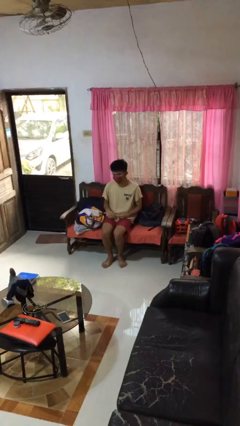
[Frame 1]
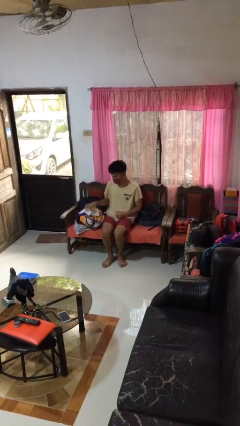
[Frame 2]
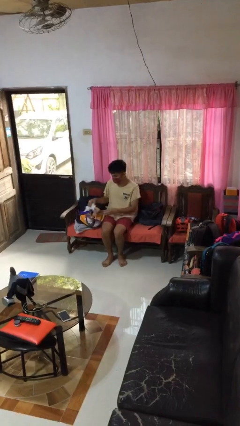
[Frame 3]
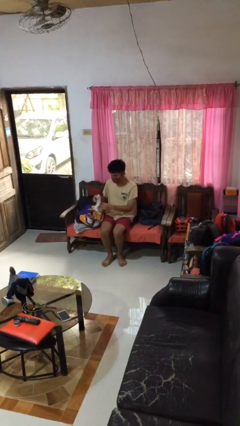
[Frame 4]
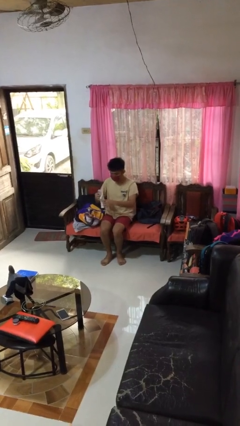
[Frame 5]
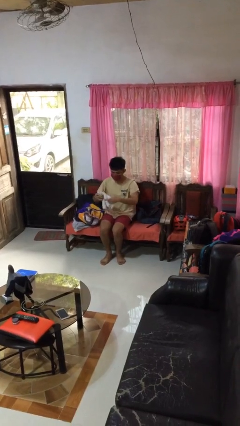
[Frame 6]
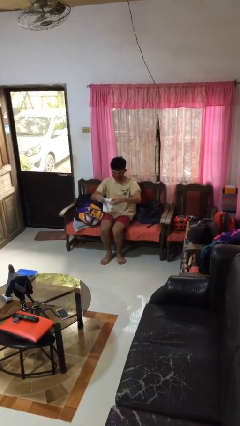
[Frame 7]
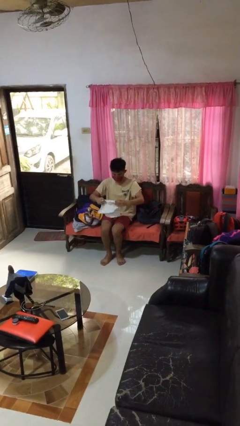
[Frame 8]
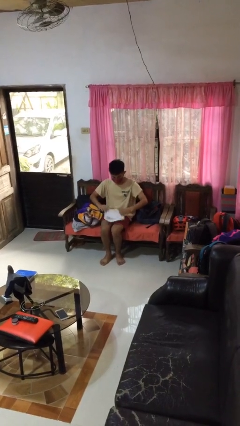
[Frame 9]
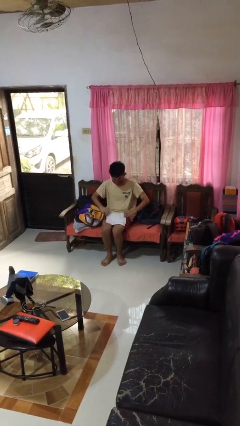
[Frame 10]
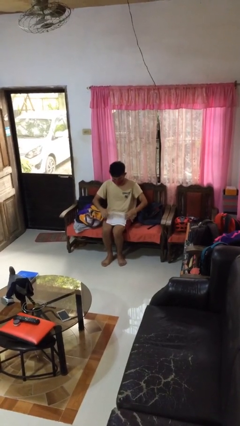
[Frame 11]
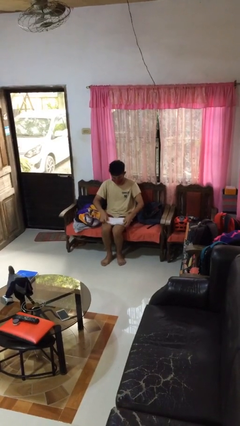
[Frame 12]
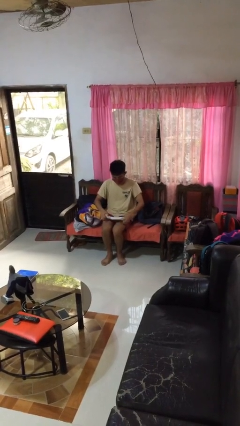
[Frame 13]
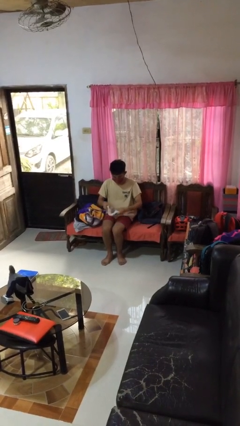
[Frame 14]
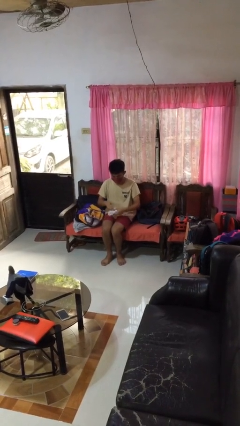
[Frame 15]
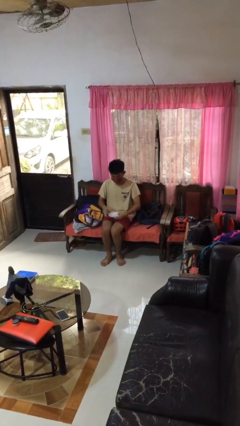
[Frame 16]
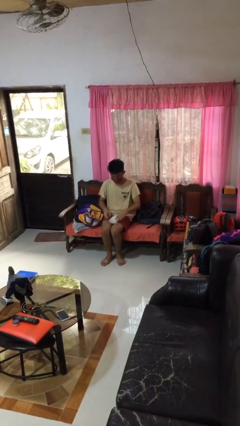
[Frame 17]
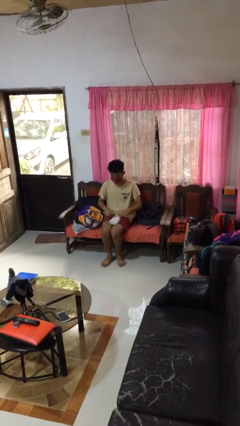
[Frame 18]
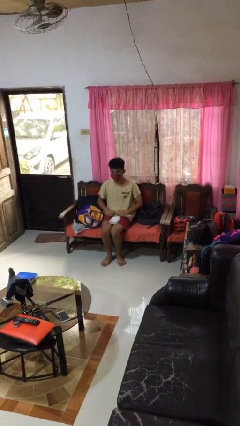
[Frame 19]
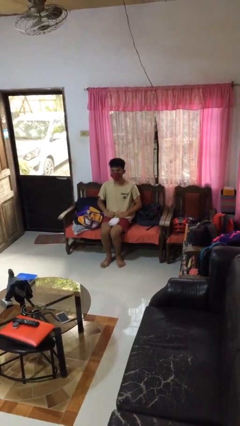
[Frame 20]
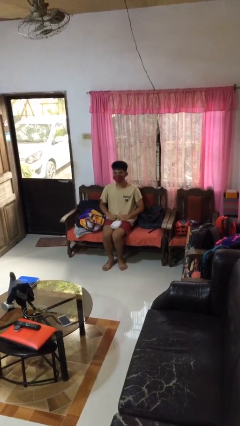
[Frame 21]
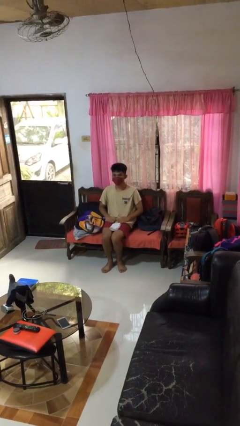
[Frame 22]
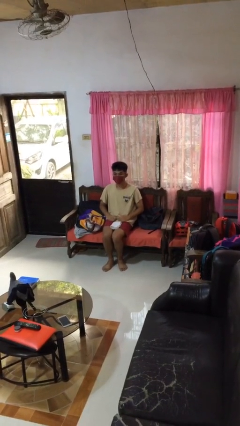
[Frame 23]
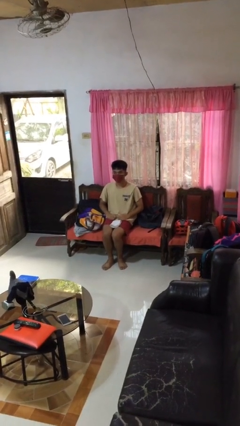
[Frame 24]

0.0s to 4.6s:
person folds towel

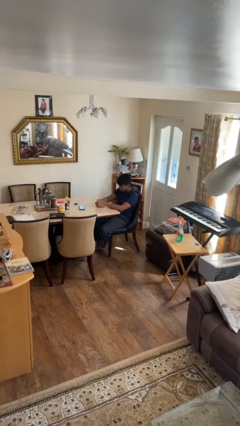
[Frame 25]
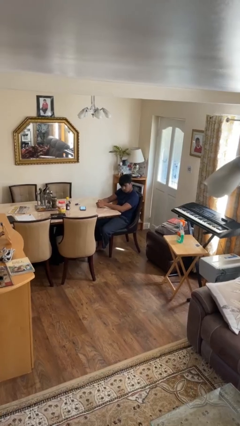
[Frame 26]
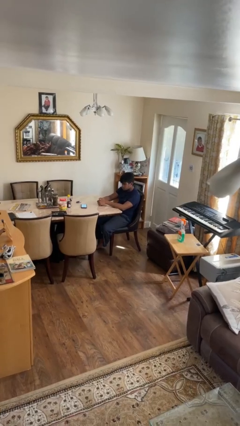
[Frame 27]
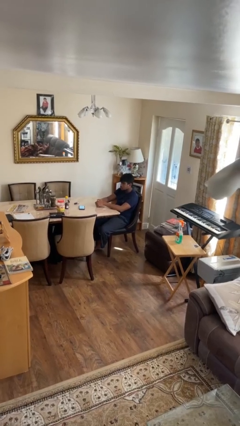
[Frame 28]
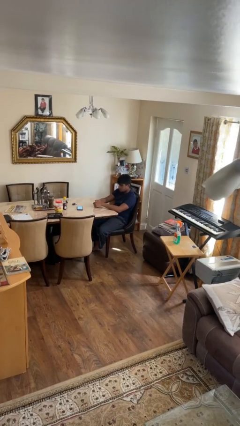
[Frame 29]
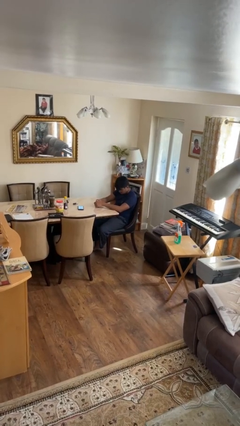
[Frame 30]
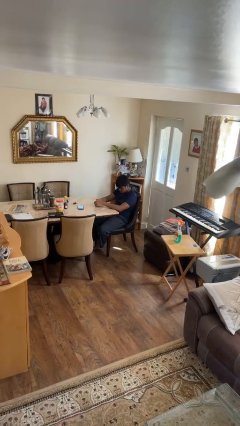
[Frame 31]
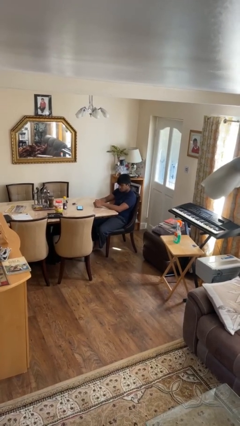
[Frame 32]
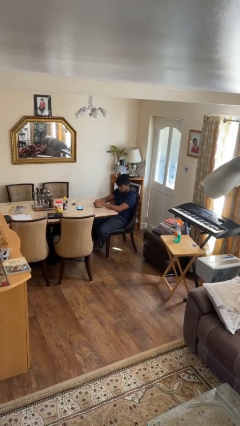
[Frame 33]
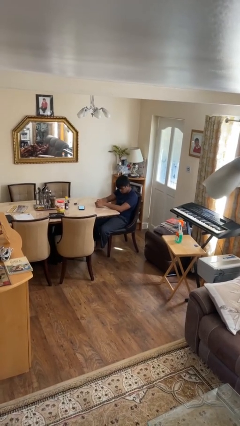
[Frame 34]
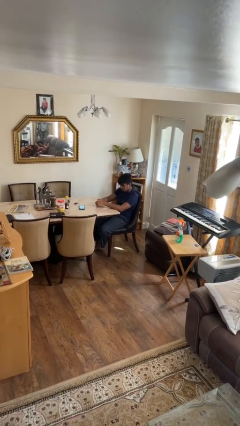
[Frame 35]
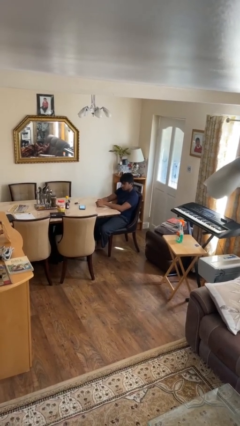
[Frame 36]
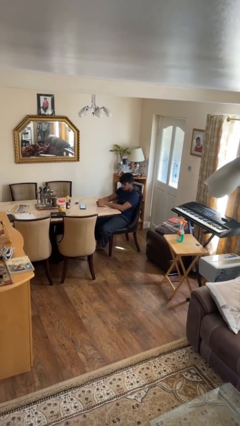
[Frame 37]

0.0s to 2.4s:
person nods head

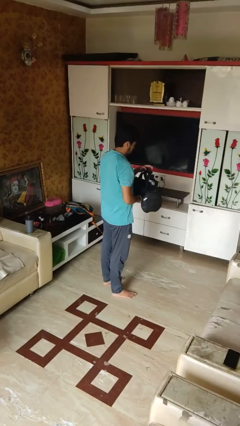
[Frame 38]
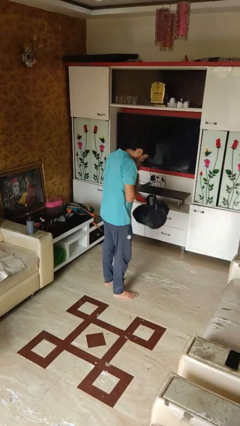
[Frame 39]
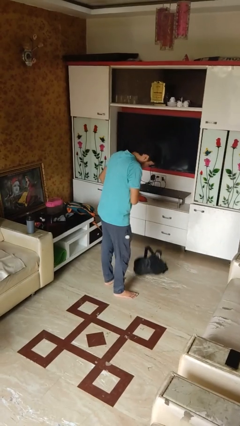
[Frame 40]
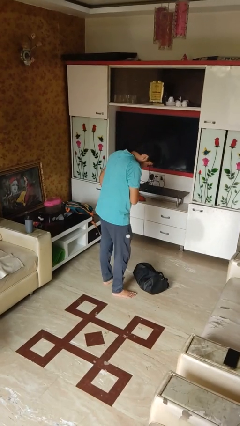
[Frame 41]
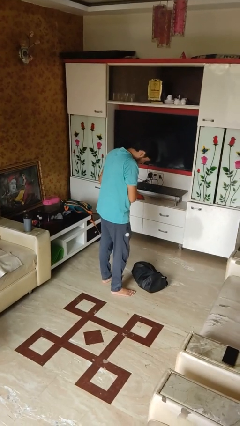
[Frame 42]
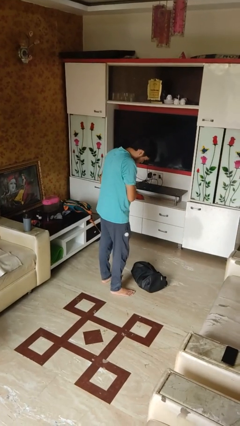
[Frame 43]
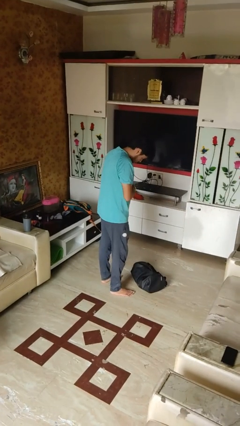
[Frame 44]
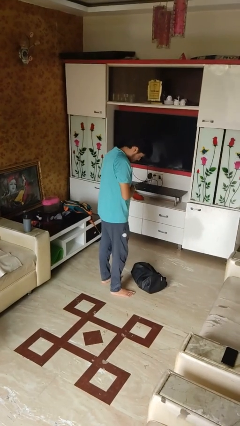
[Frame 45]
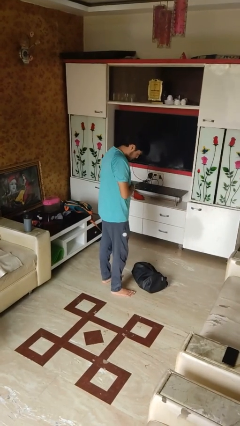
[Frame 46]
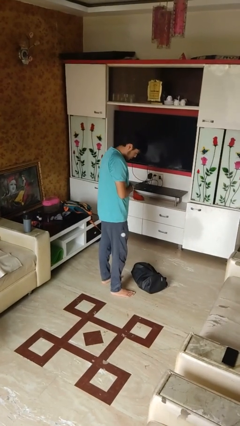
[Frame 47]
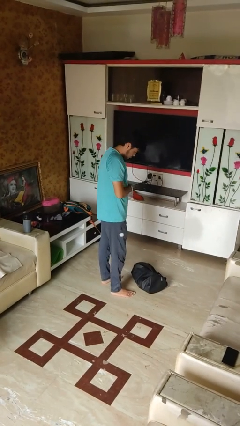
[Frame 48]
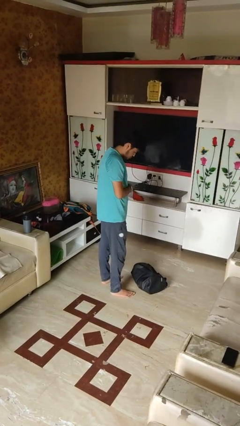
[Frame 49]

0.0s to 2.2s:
person drops object

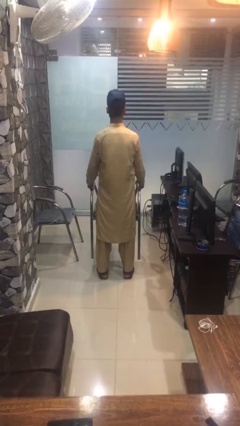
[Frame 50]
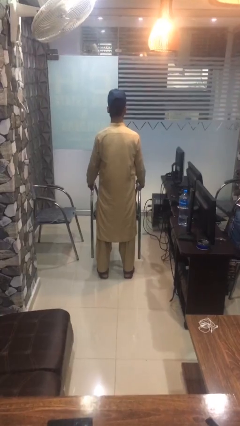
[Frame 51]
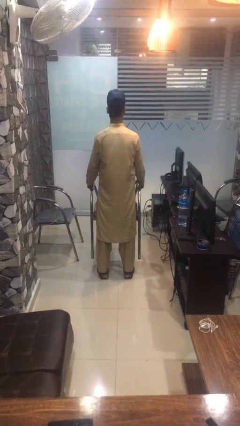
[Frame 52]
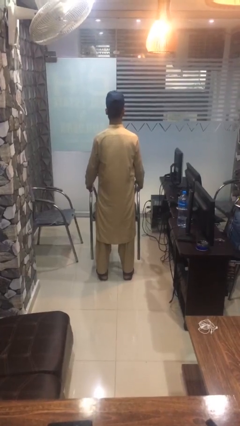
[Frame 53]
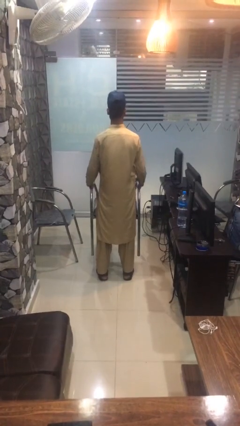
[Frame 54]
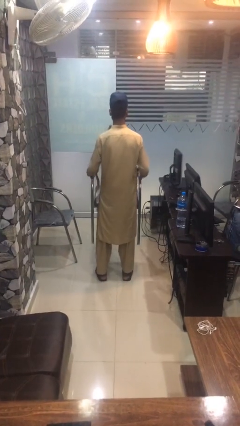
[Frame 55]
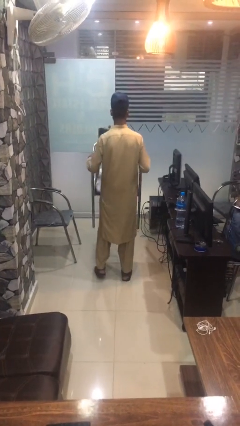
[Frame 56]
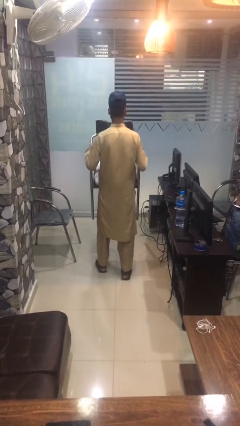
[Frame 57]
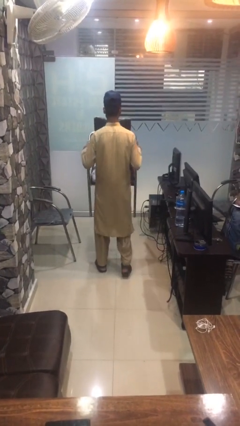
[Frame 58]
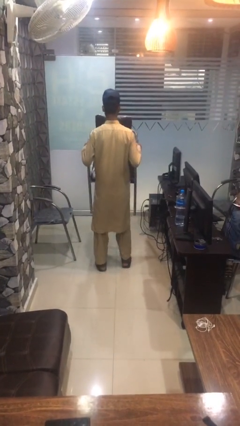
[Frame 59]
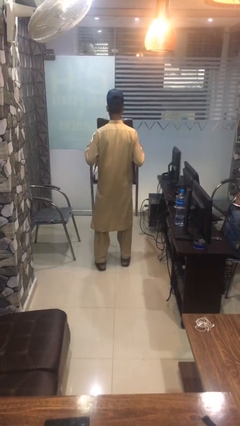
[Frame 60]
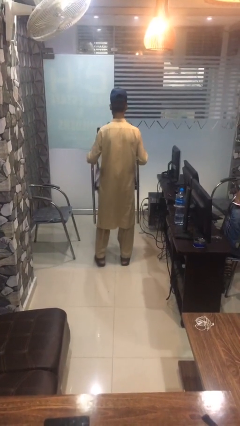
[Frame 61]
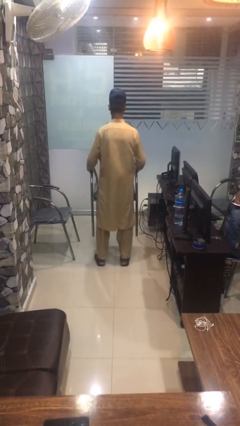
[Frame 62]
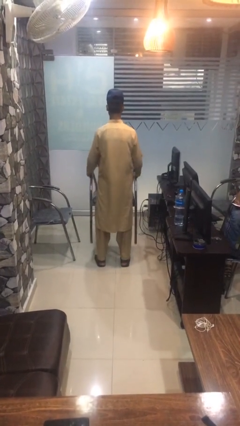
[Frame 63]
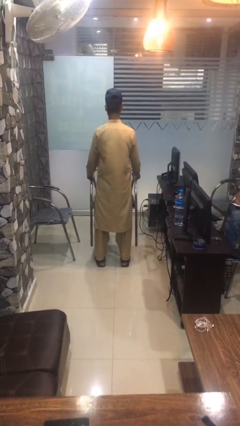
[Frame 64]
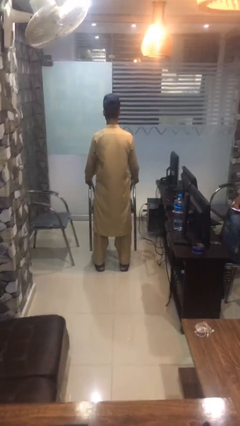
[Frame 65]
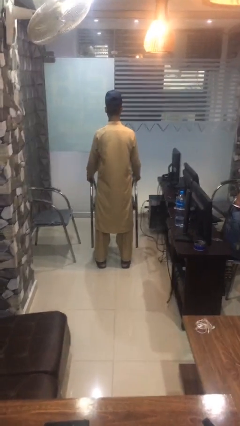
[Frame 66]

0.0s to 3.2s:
person carries furniture

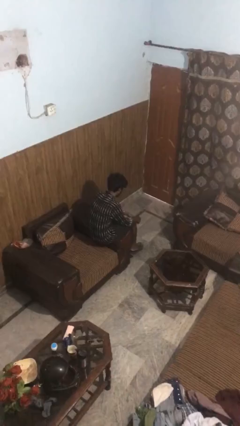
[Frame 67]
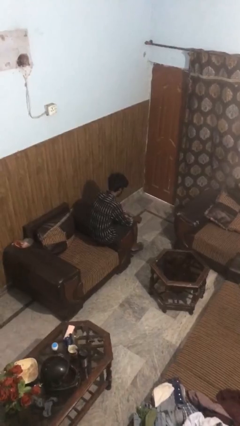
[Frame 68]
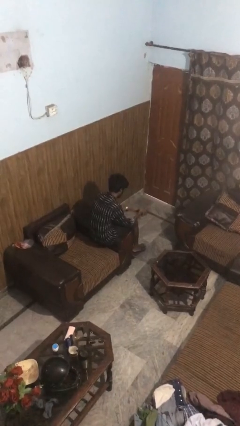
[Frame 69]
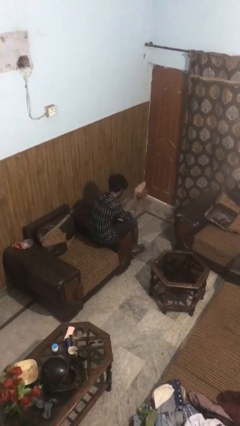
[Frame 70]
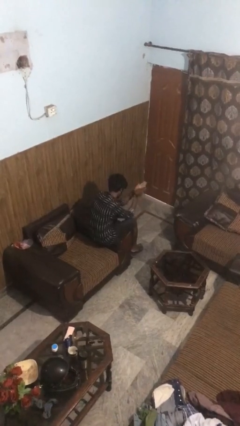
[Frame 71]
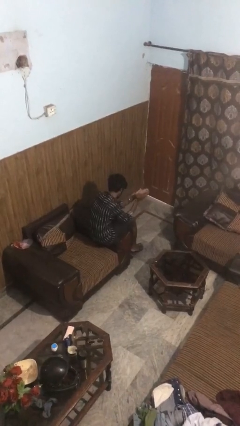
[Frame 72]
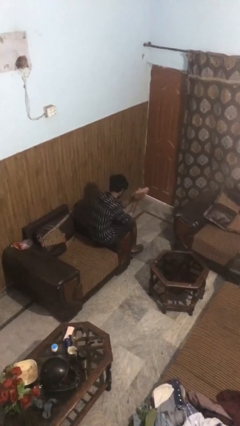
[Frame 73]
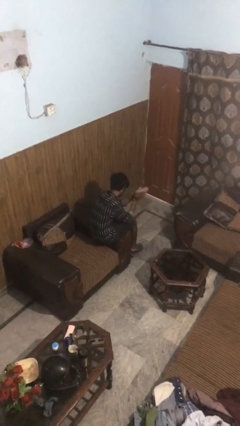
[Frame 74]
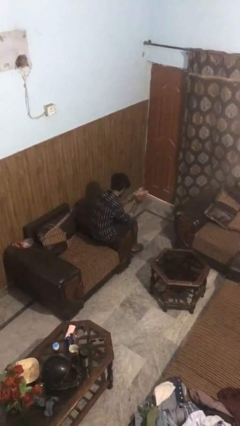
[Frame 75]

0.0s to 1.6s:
person claps hands

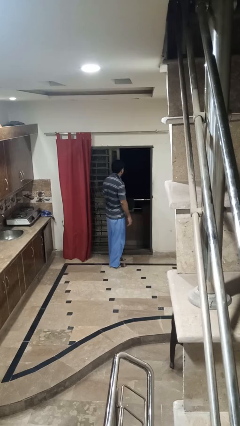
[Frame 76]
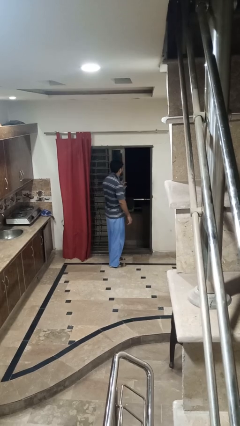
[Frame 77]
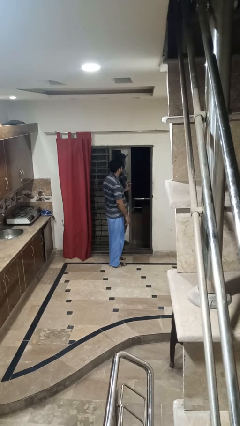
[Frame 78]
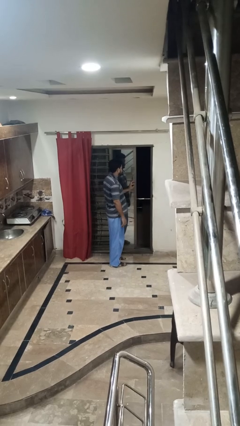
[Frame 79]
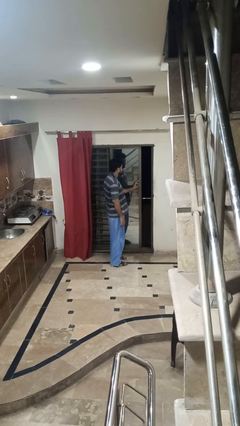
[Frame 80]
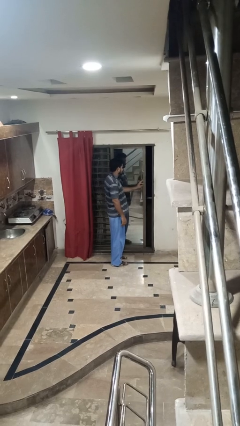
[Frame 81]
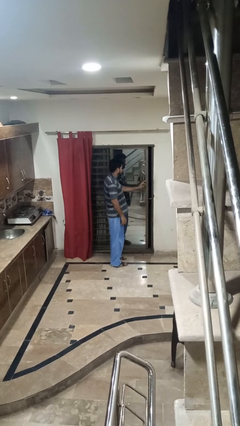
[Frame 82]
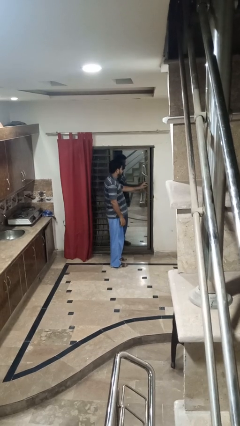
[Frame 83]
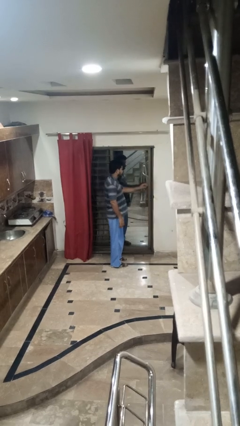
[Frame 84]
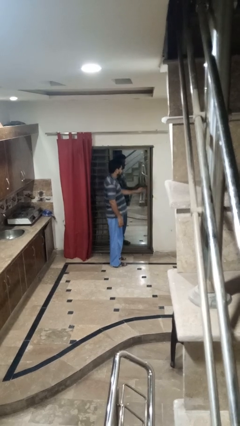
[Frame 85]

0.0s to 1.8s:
person closes sliding door

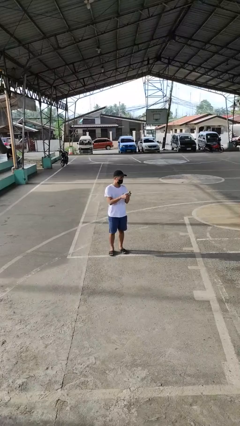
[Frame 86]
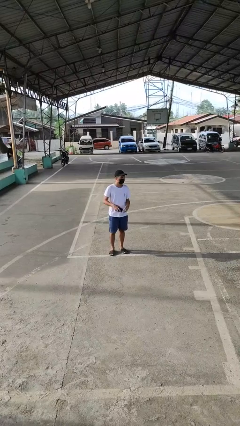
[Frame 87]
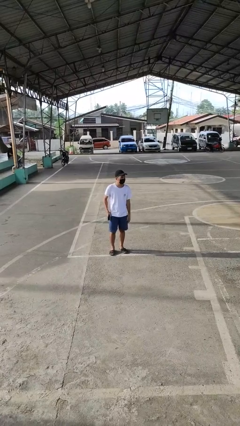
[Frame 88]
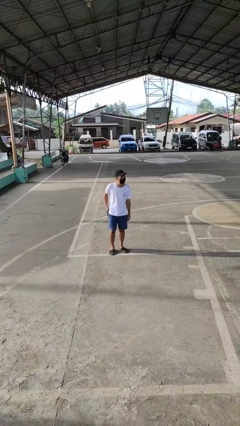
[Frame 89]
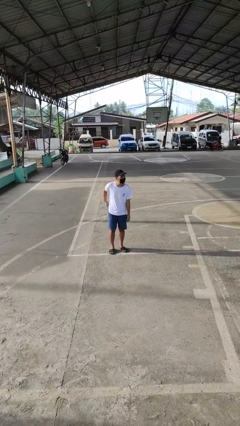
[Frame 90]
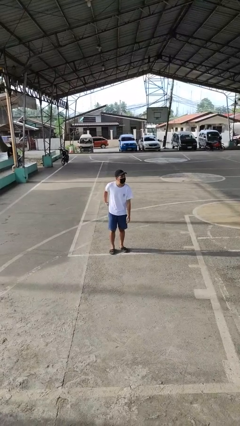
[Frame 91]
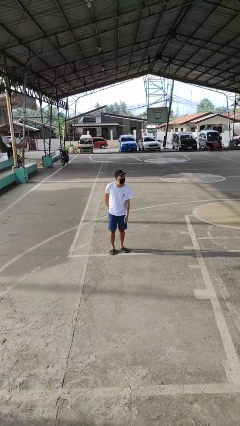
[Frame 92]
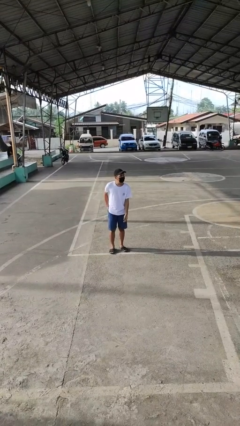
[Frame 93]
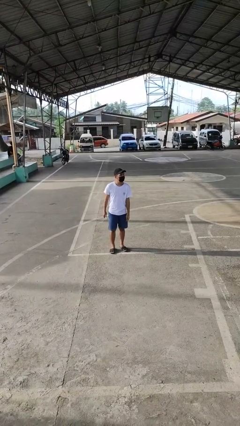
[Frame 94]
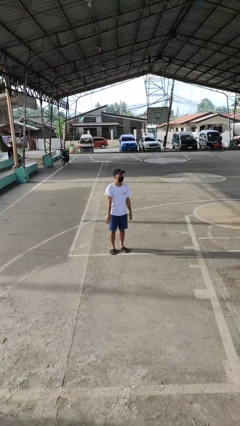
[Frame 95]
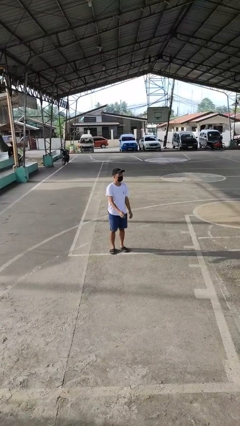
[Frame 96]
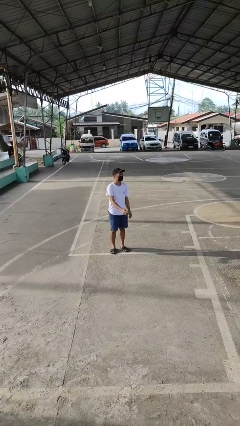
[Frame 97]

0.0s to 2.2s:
person puts phone into pocket
